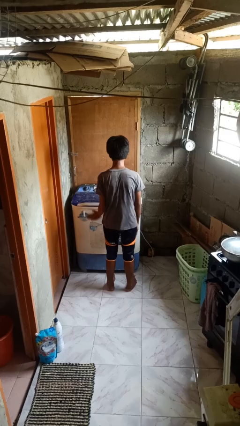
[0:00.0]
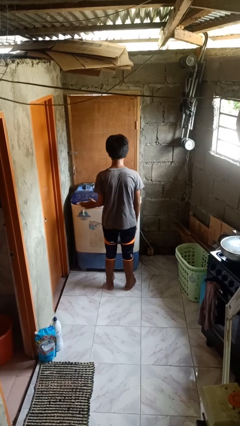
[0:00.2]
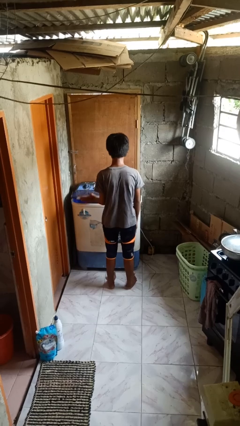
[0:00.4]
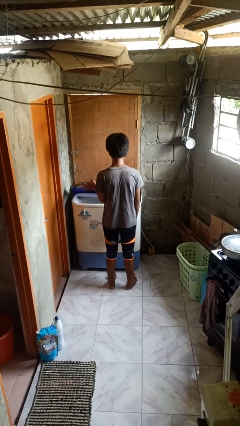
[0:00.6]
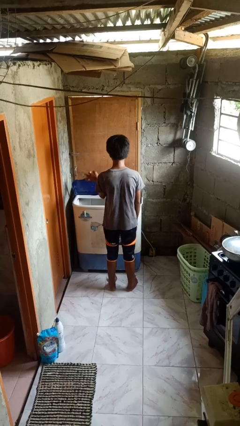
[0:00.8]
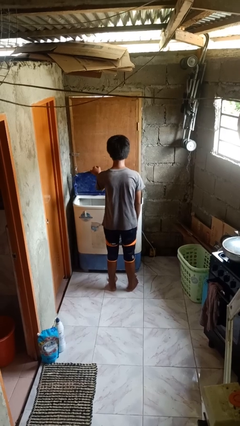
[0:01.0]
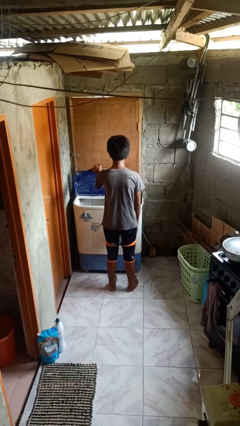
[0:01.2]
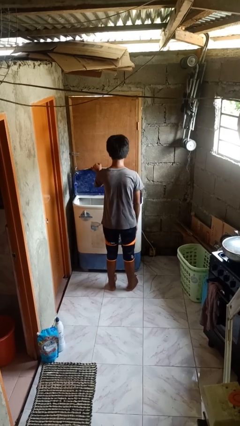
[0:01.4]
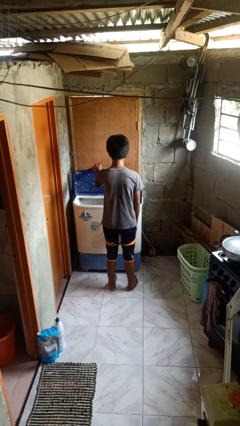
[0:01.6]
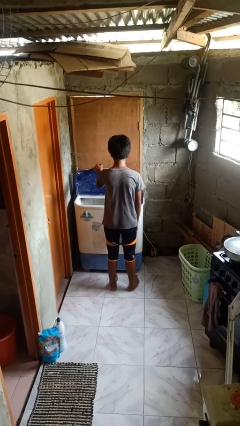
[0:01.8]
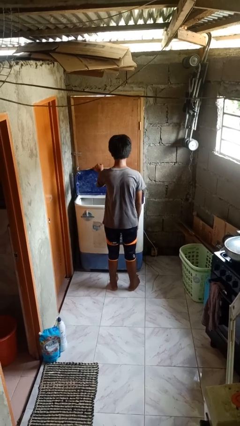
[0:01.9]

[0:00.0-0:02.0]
person opens clothes washer

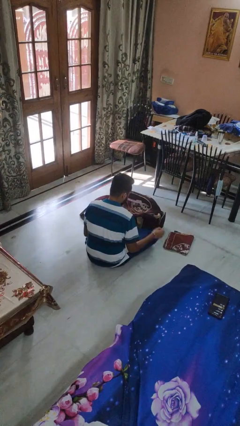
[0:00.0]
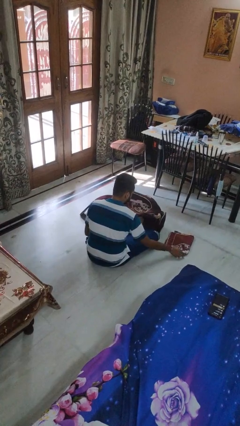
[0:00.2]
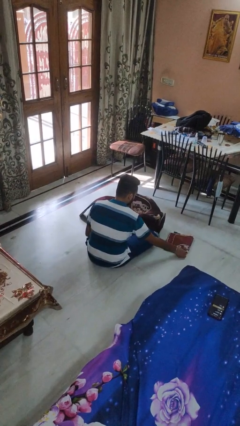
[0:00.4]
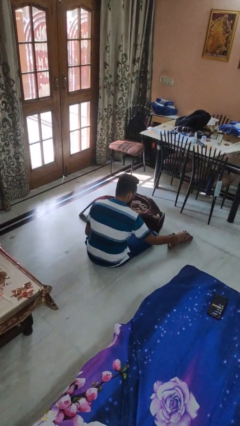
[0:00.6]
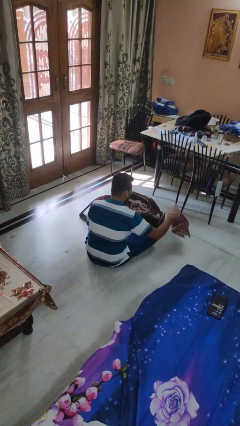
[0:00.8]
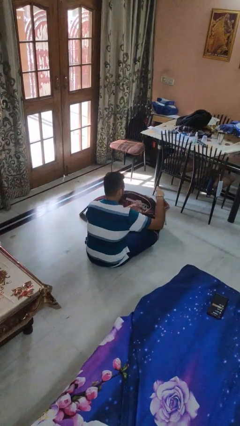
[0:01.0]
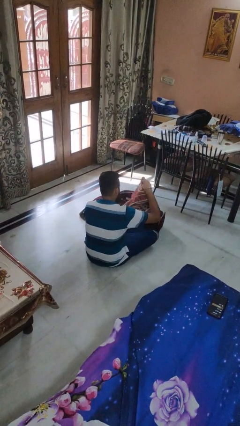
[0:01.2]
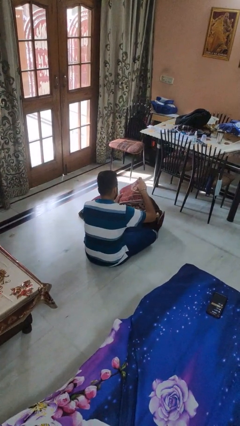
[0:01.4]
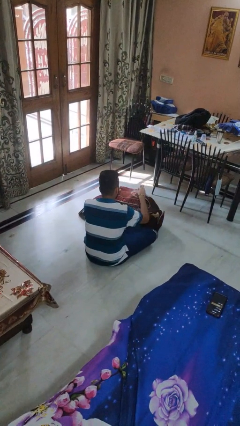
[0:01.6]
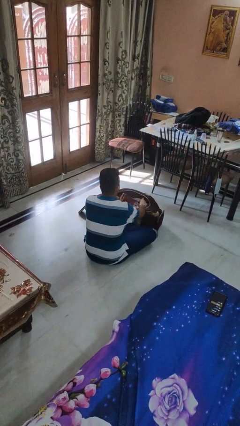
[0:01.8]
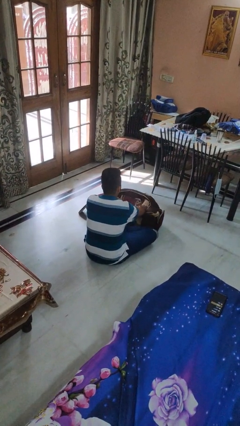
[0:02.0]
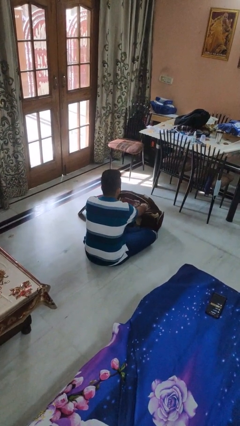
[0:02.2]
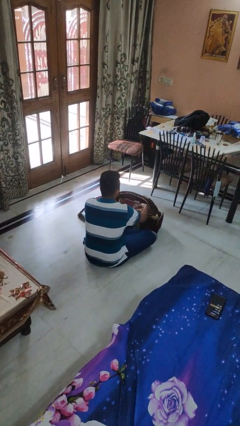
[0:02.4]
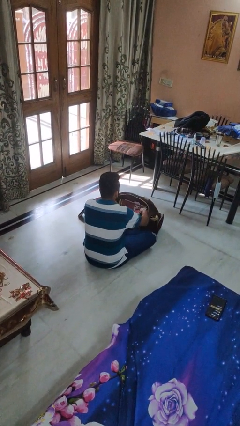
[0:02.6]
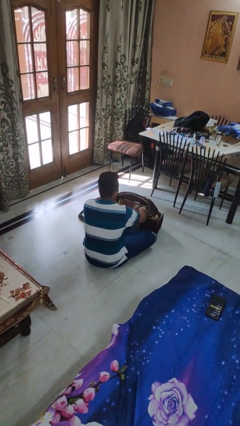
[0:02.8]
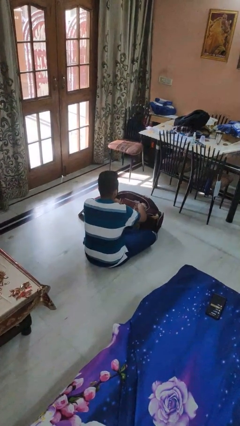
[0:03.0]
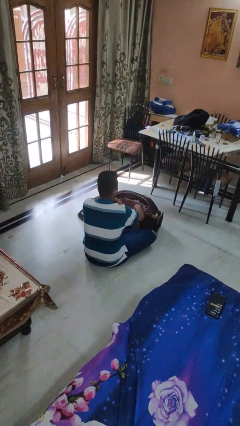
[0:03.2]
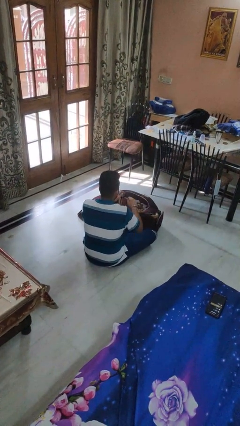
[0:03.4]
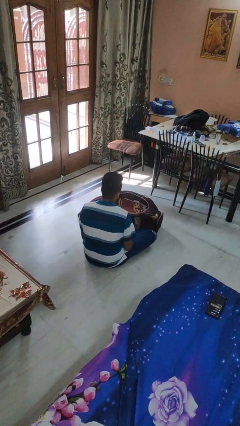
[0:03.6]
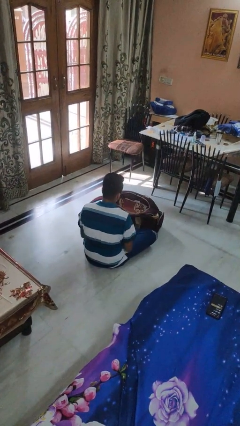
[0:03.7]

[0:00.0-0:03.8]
person loads clothes into suitcase

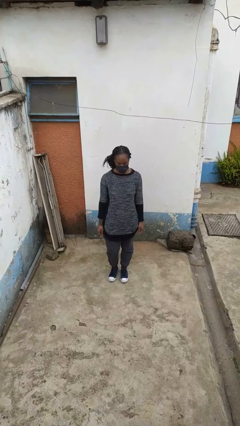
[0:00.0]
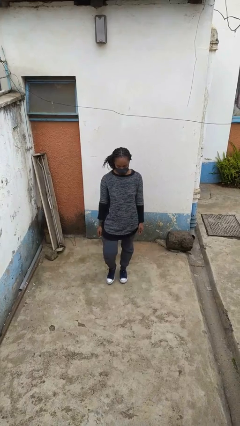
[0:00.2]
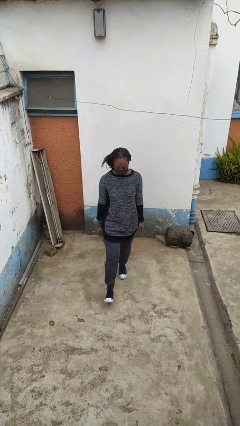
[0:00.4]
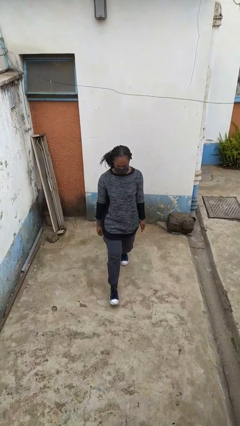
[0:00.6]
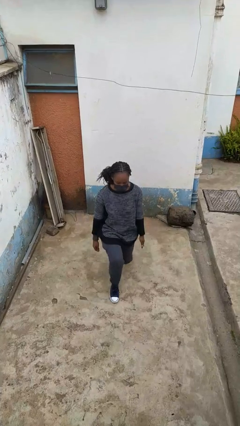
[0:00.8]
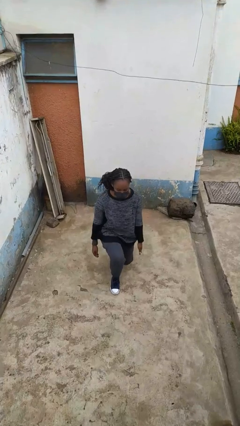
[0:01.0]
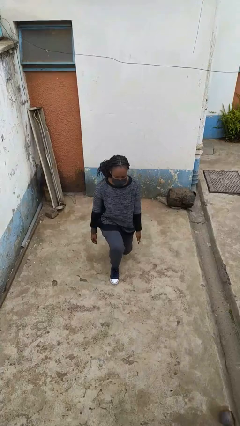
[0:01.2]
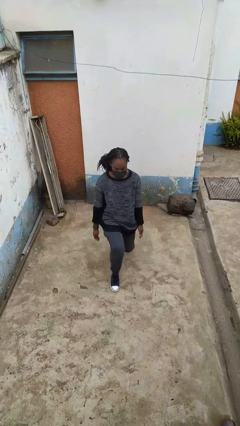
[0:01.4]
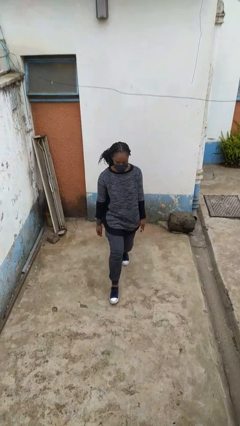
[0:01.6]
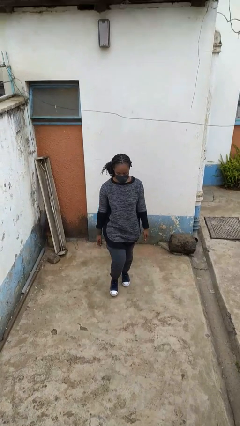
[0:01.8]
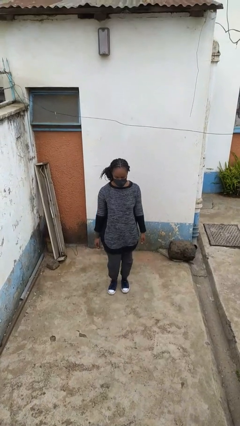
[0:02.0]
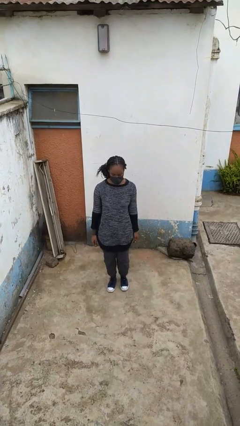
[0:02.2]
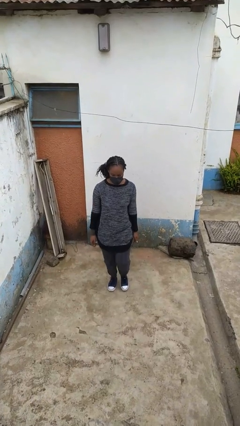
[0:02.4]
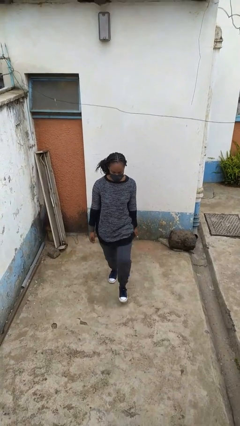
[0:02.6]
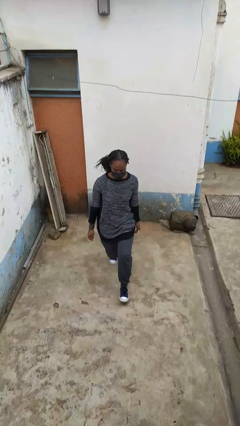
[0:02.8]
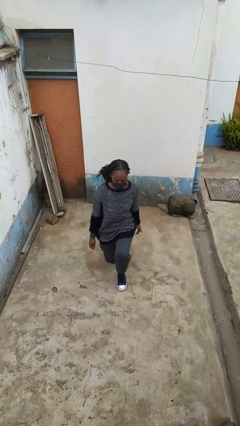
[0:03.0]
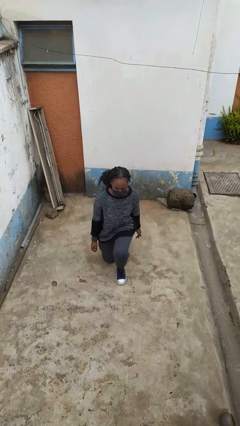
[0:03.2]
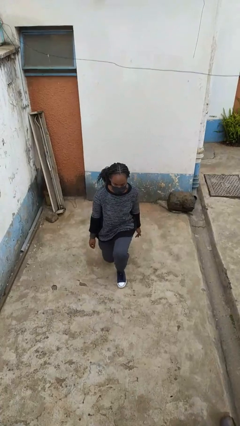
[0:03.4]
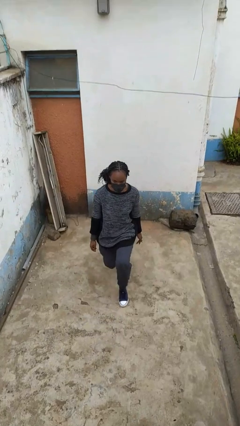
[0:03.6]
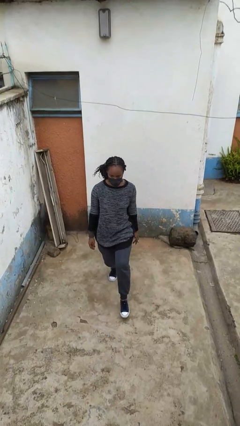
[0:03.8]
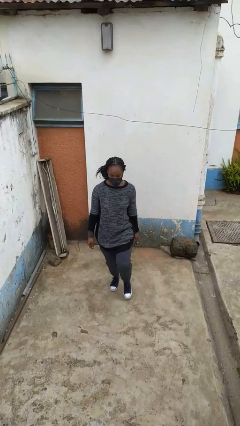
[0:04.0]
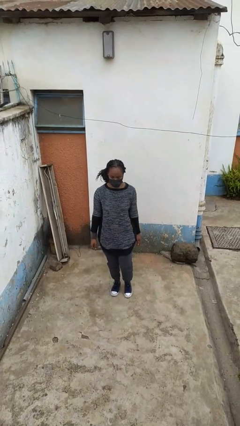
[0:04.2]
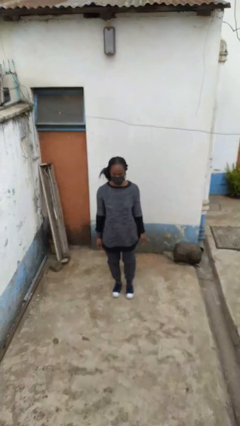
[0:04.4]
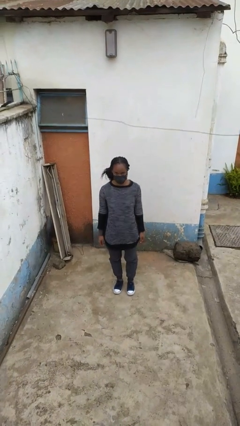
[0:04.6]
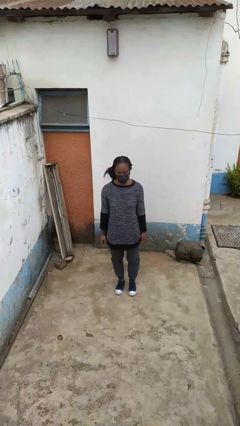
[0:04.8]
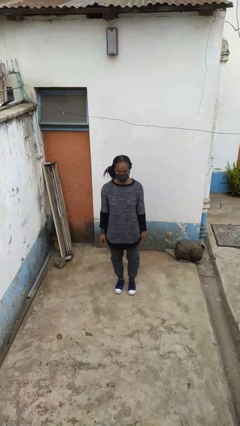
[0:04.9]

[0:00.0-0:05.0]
person exercises with lunges

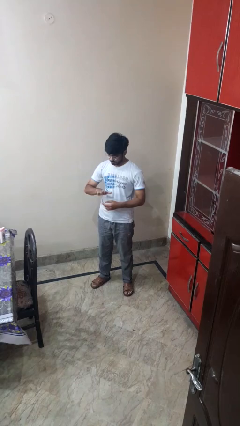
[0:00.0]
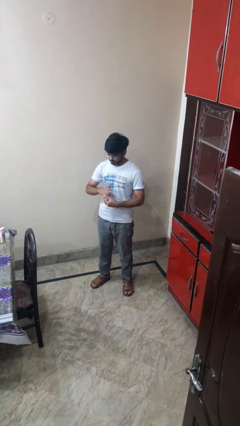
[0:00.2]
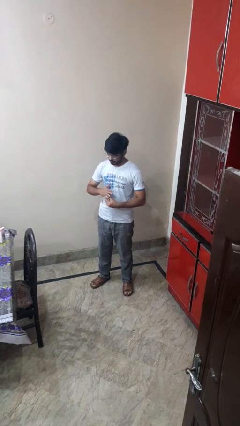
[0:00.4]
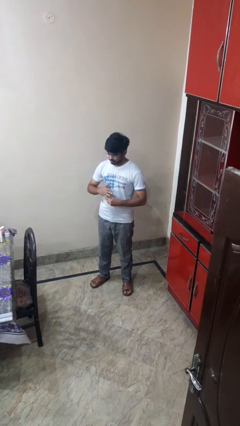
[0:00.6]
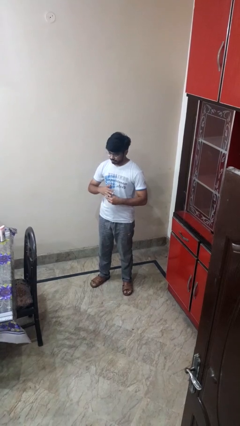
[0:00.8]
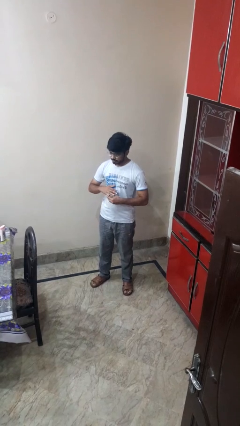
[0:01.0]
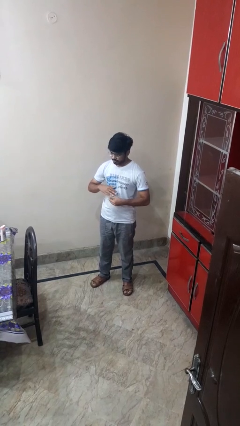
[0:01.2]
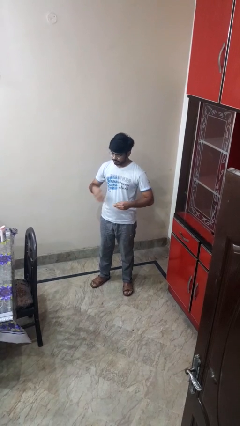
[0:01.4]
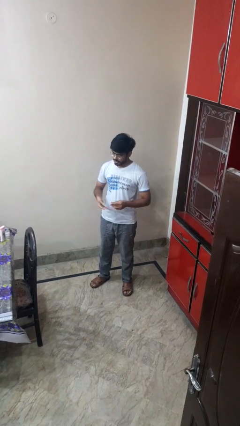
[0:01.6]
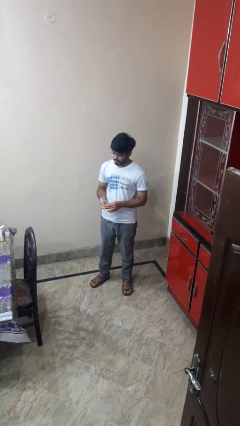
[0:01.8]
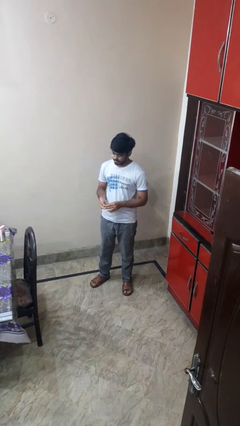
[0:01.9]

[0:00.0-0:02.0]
person takes off ring

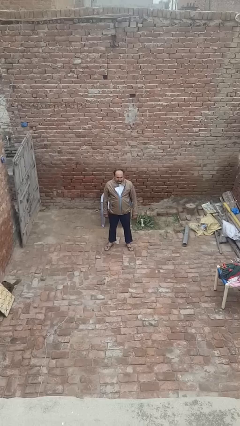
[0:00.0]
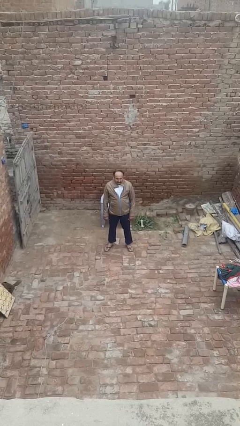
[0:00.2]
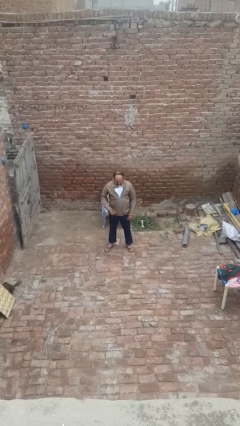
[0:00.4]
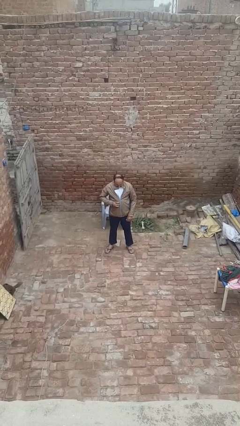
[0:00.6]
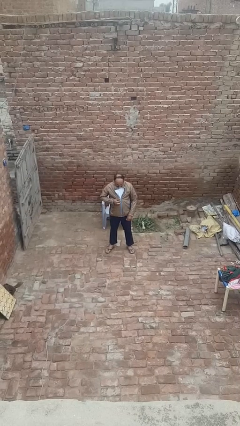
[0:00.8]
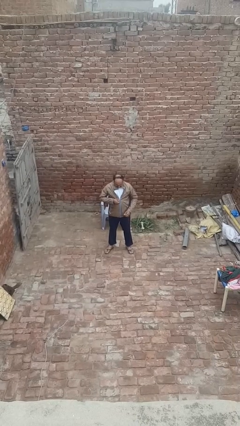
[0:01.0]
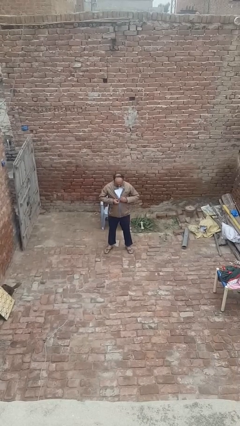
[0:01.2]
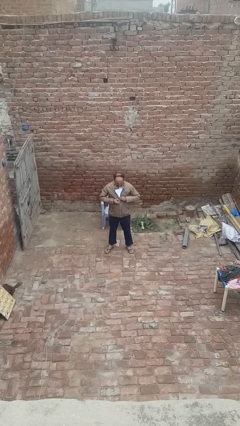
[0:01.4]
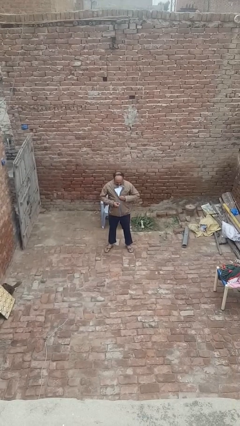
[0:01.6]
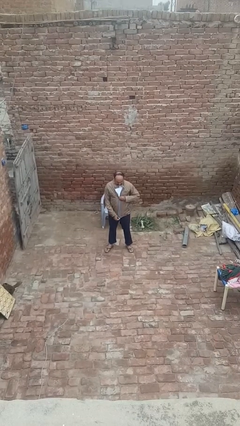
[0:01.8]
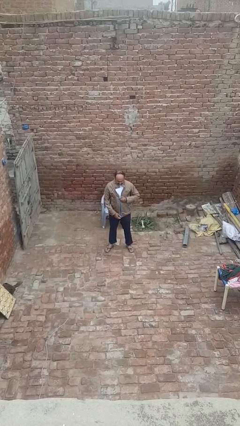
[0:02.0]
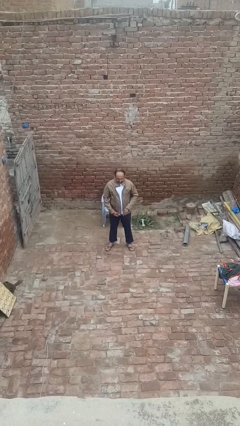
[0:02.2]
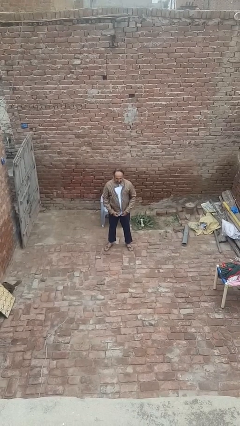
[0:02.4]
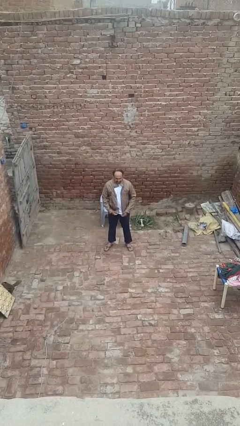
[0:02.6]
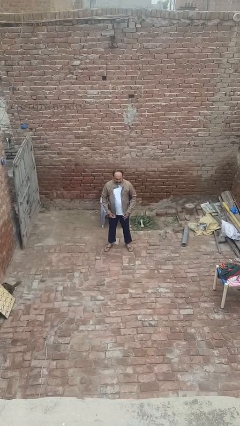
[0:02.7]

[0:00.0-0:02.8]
person unzips jacket

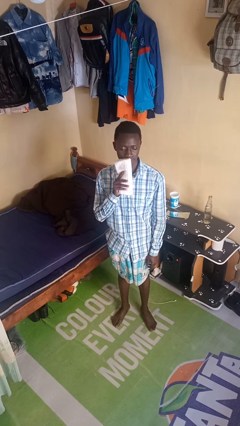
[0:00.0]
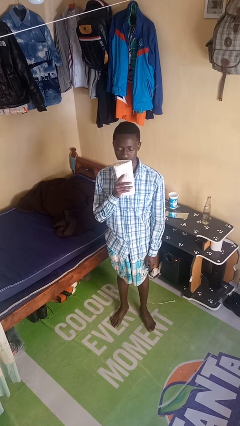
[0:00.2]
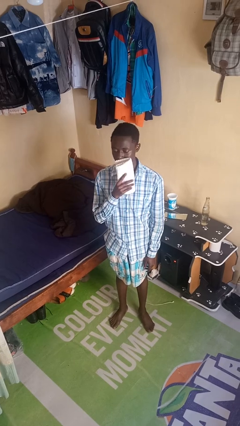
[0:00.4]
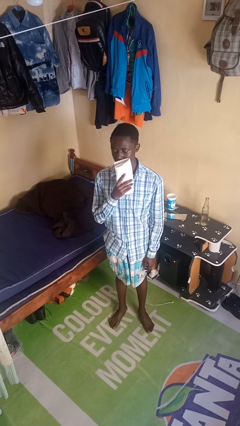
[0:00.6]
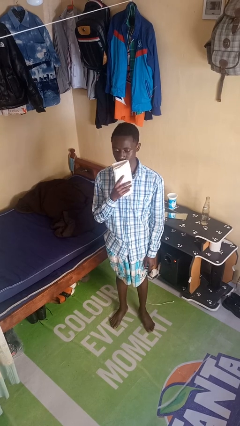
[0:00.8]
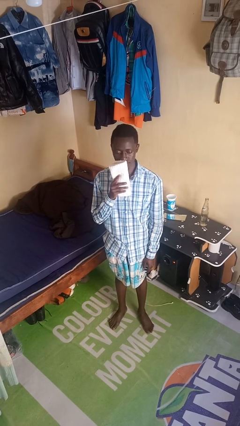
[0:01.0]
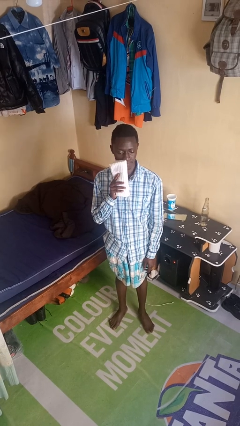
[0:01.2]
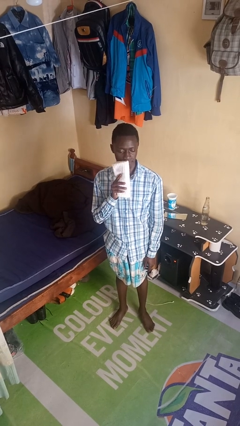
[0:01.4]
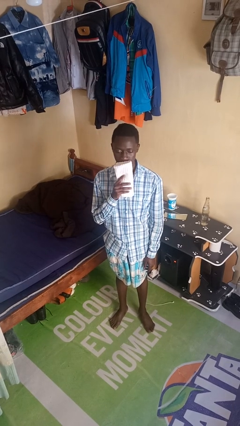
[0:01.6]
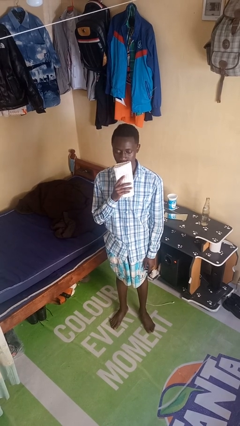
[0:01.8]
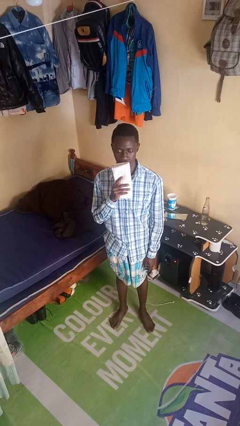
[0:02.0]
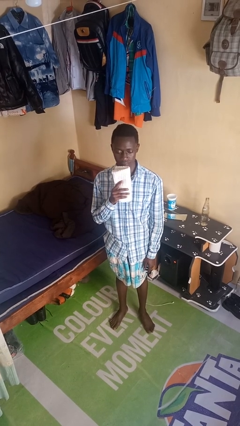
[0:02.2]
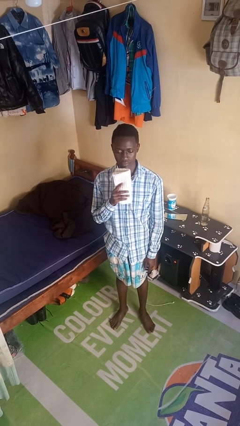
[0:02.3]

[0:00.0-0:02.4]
person wipes mouth with napkin
